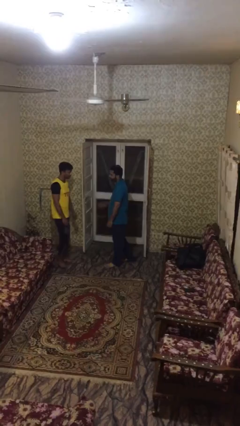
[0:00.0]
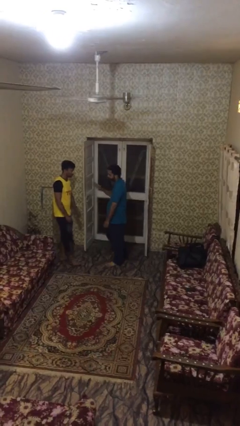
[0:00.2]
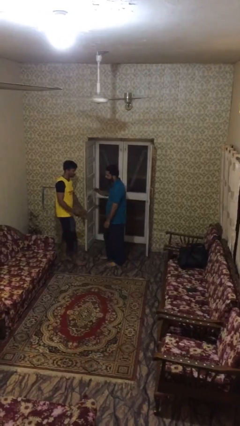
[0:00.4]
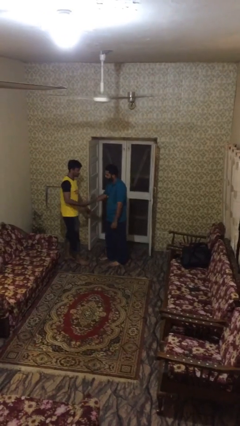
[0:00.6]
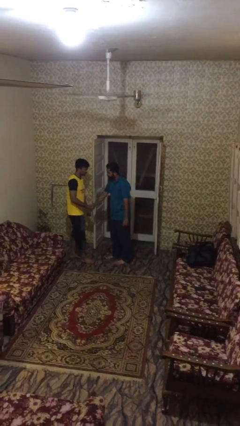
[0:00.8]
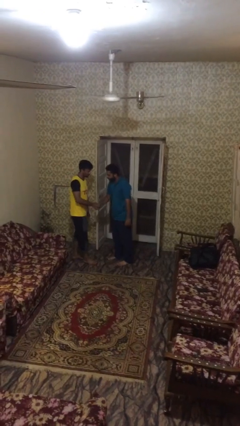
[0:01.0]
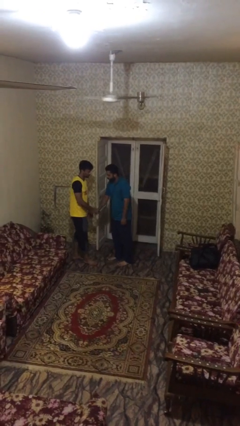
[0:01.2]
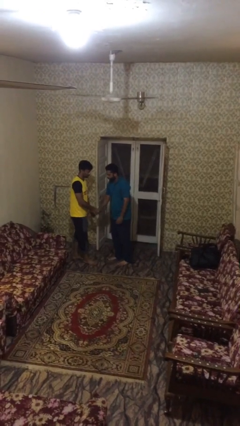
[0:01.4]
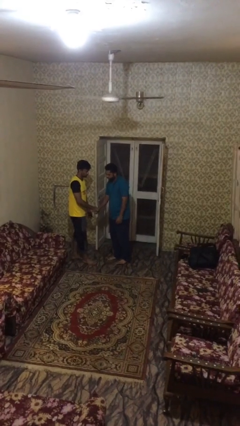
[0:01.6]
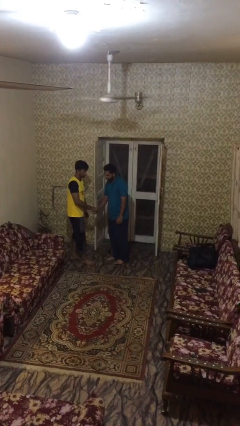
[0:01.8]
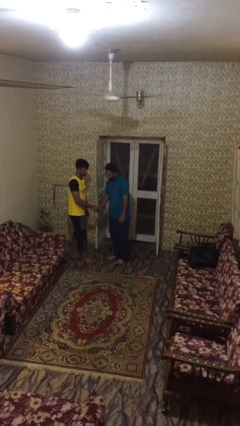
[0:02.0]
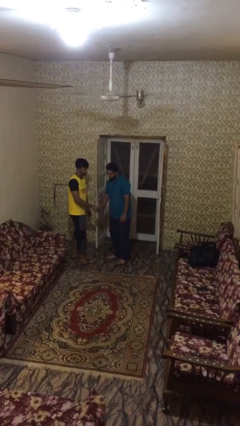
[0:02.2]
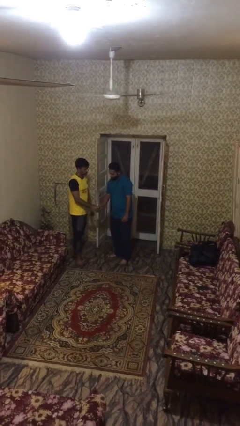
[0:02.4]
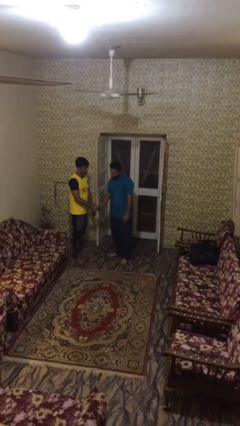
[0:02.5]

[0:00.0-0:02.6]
person shakes hand

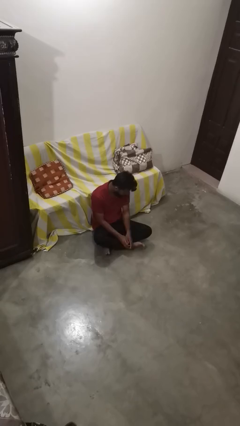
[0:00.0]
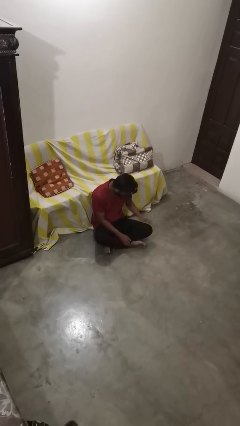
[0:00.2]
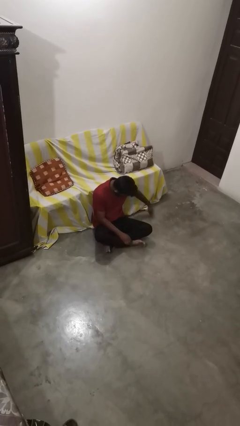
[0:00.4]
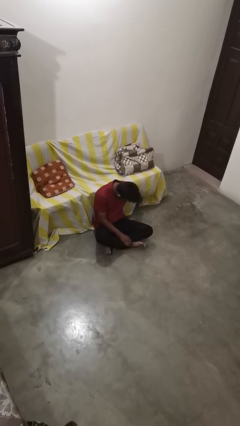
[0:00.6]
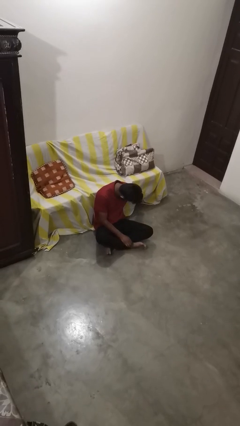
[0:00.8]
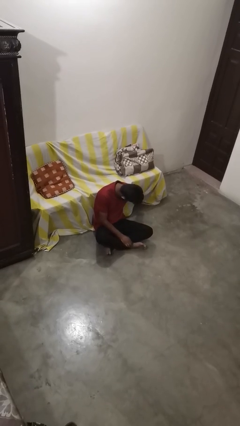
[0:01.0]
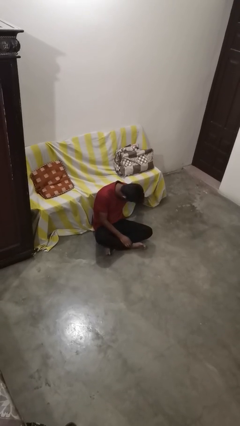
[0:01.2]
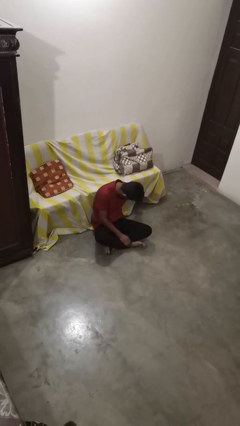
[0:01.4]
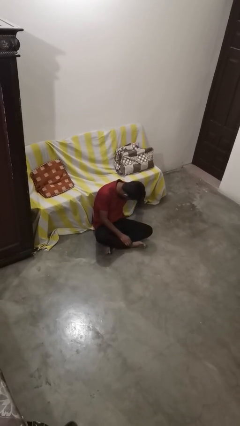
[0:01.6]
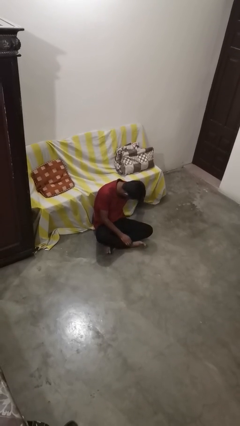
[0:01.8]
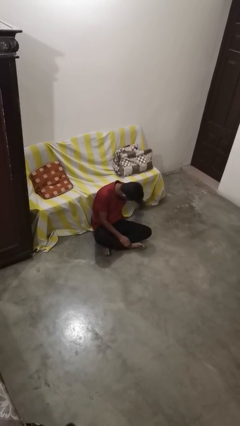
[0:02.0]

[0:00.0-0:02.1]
person searches under couch

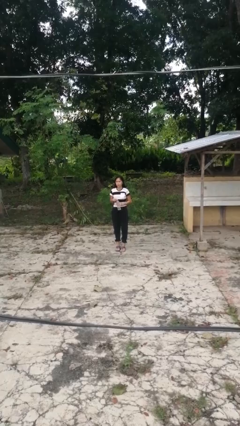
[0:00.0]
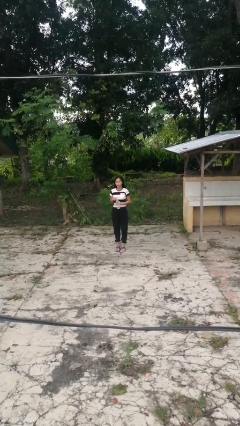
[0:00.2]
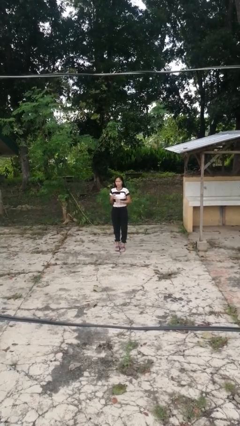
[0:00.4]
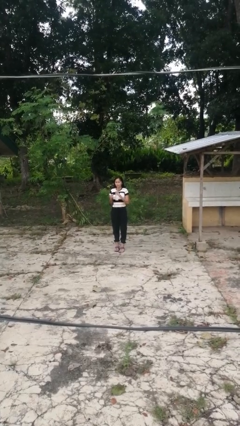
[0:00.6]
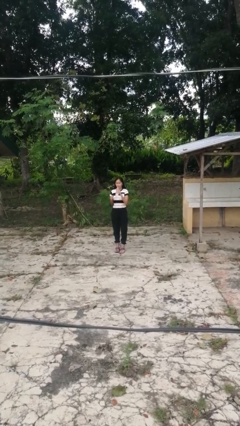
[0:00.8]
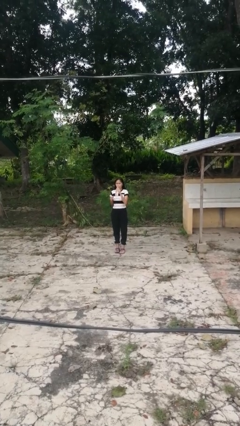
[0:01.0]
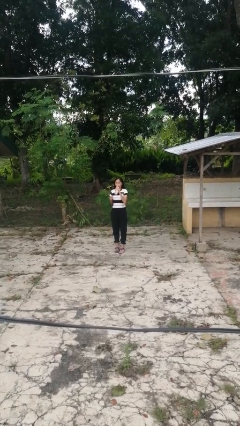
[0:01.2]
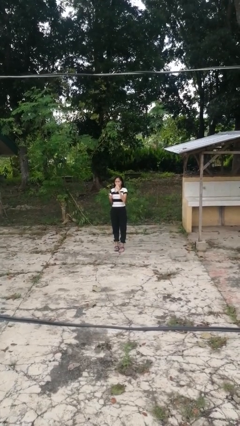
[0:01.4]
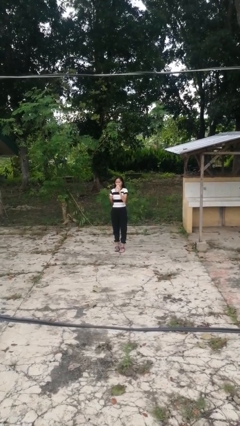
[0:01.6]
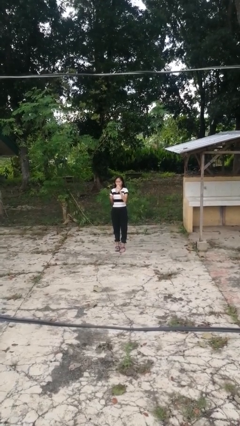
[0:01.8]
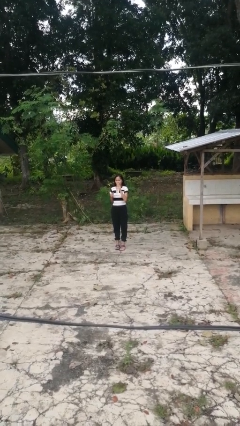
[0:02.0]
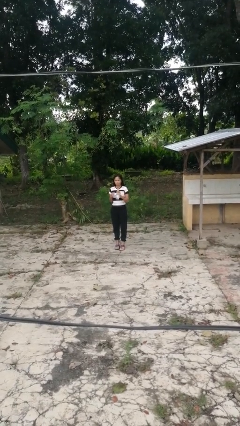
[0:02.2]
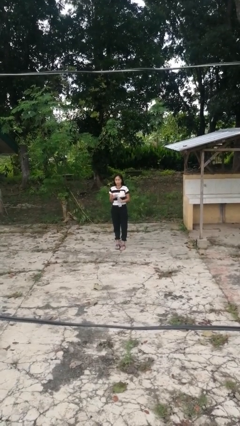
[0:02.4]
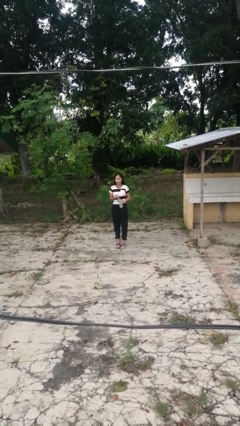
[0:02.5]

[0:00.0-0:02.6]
person drinks from bottle

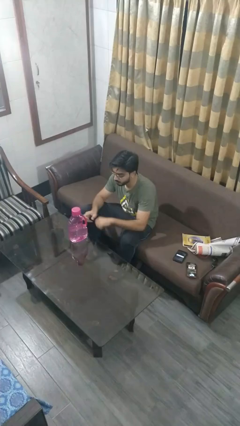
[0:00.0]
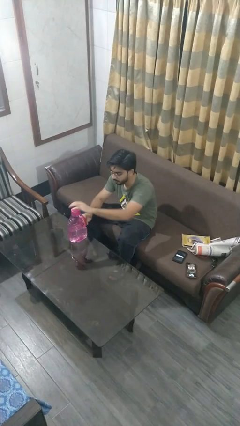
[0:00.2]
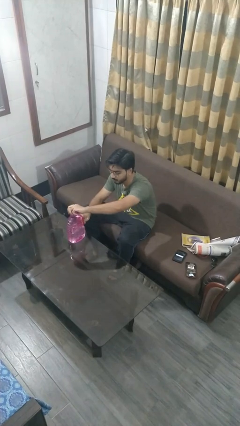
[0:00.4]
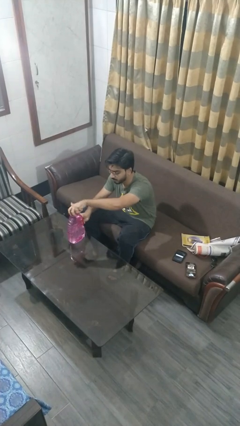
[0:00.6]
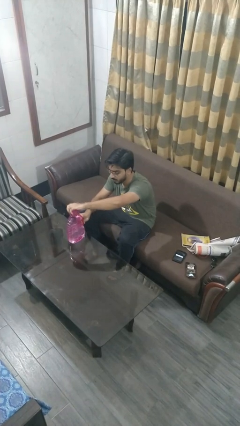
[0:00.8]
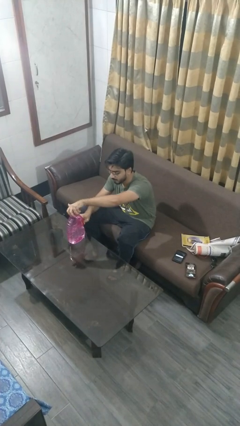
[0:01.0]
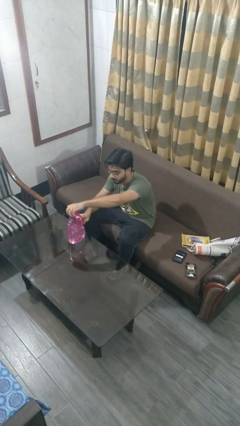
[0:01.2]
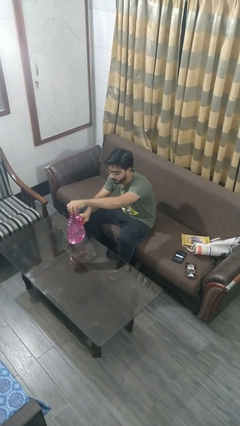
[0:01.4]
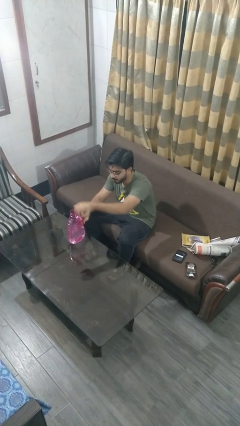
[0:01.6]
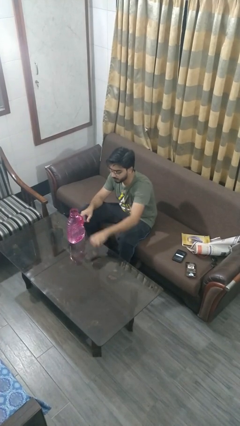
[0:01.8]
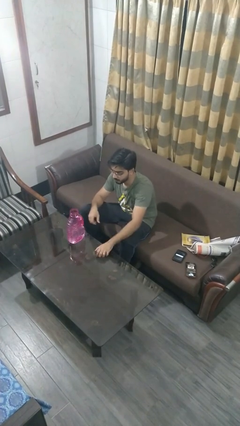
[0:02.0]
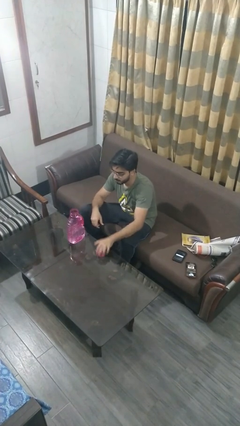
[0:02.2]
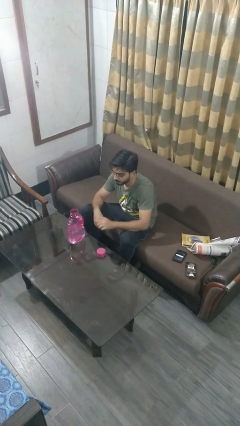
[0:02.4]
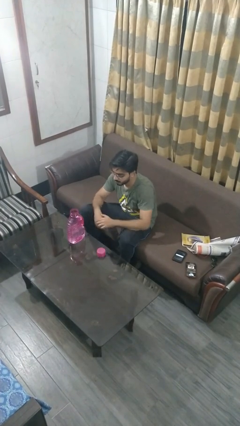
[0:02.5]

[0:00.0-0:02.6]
person unscrews lid from bottle

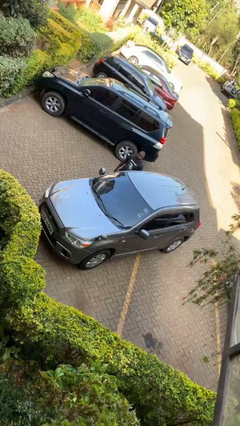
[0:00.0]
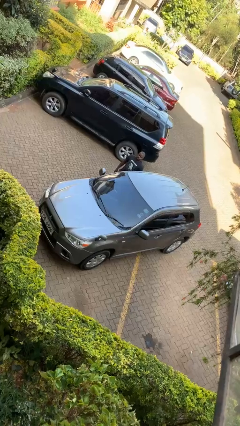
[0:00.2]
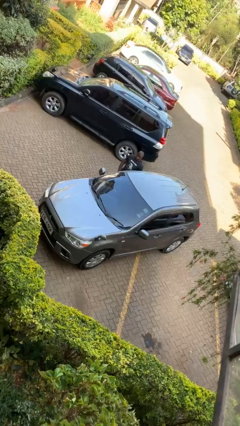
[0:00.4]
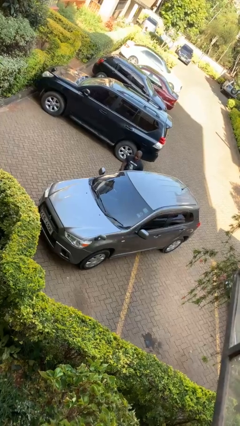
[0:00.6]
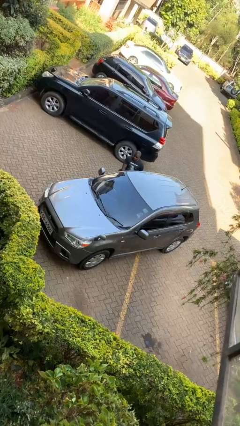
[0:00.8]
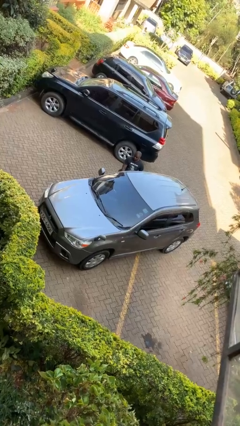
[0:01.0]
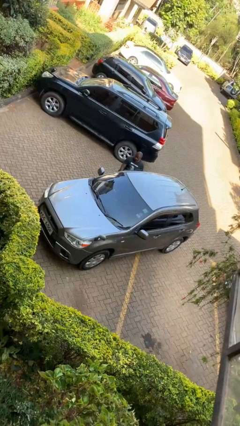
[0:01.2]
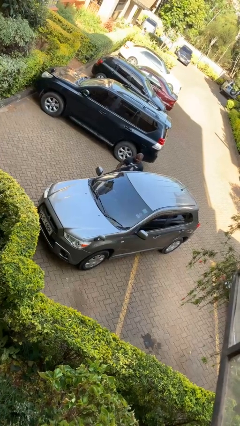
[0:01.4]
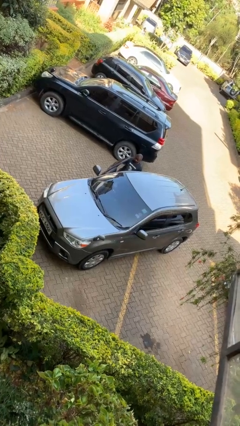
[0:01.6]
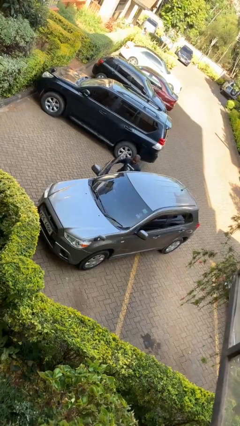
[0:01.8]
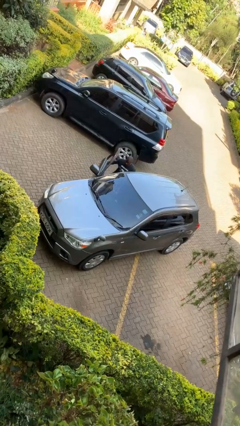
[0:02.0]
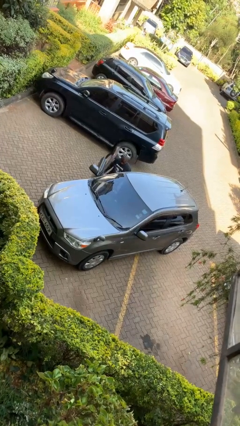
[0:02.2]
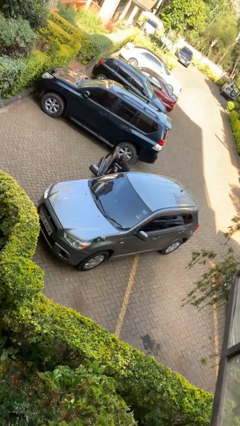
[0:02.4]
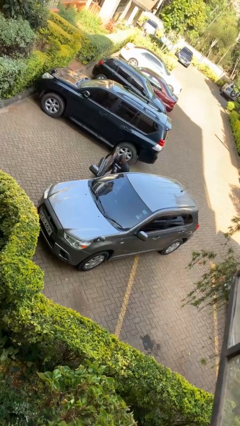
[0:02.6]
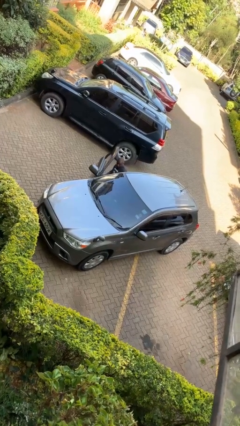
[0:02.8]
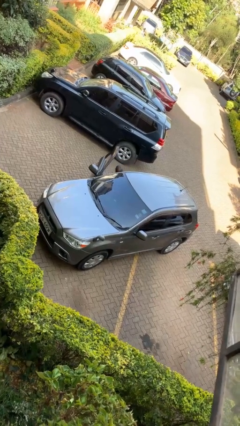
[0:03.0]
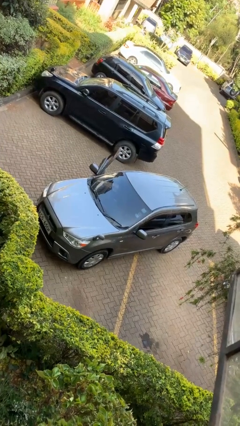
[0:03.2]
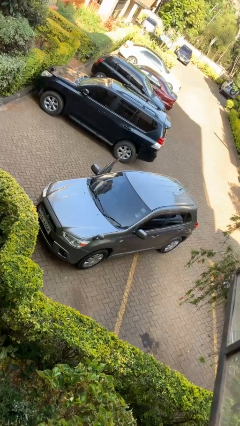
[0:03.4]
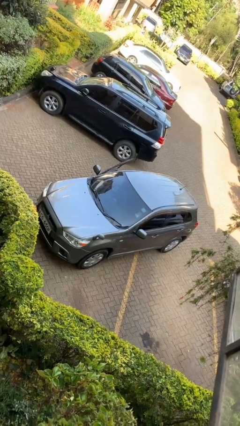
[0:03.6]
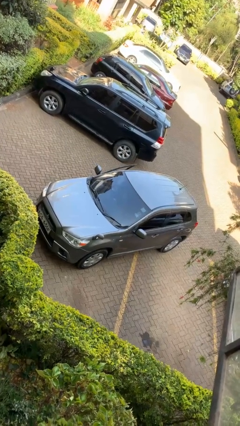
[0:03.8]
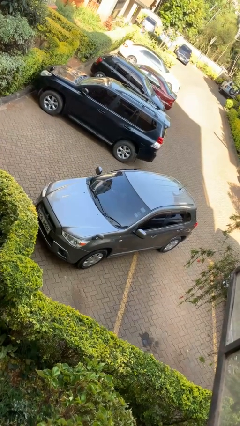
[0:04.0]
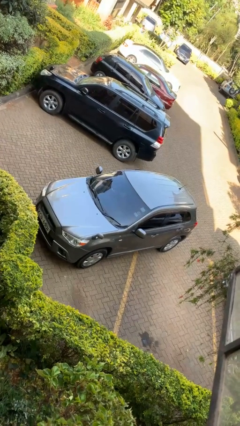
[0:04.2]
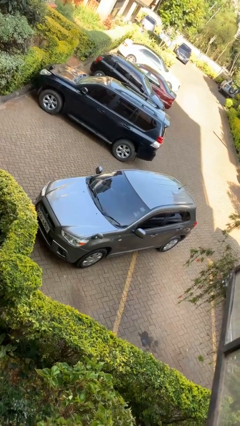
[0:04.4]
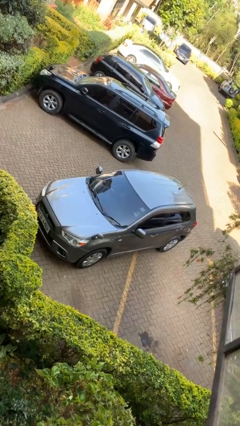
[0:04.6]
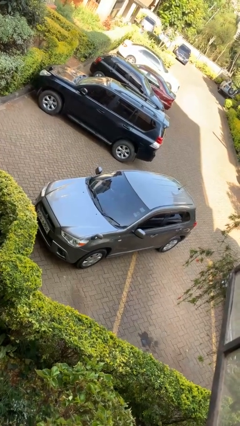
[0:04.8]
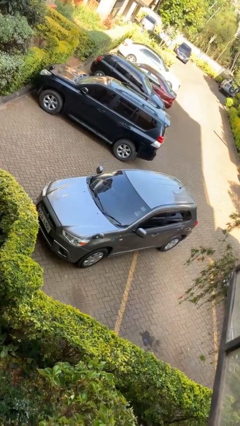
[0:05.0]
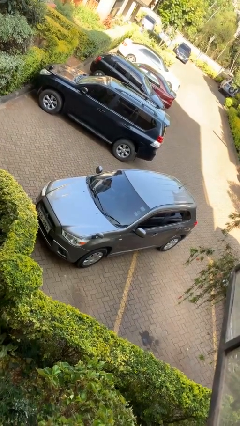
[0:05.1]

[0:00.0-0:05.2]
car picks up person

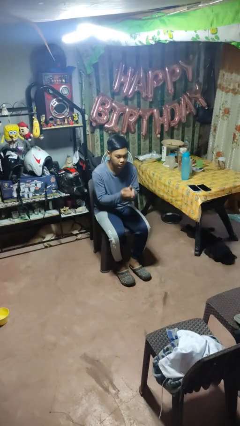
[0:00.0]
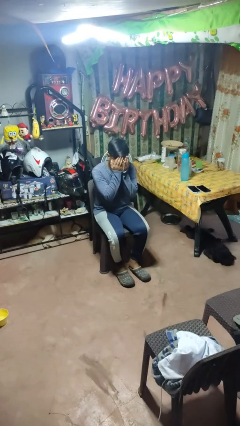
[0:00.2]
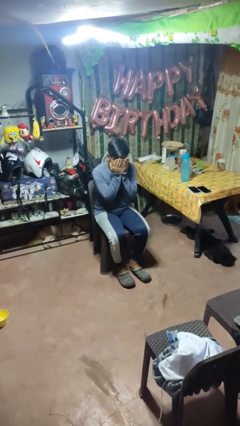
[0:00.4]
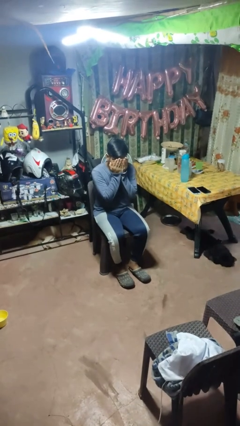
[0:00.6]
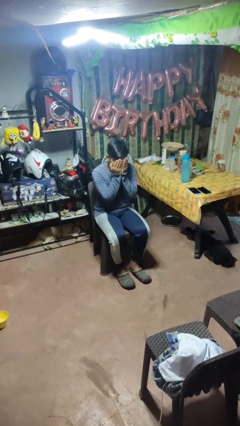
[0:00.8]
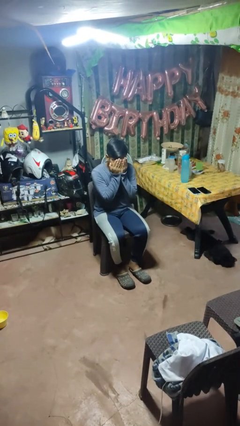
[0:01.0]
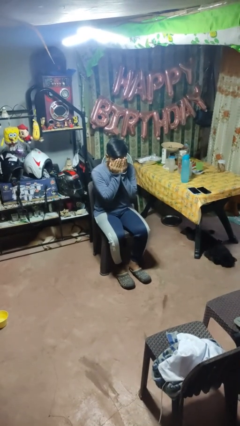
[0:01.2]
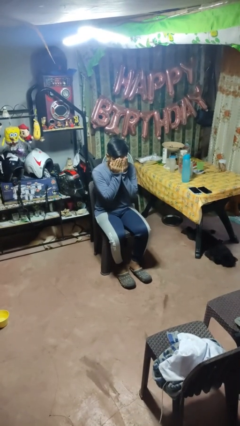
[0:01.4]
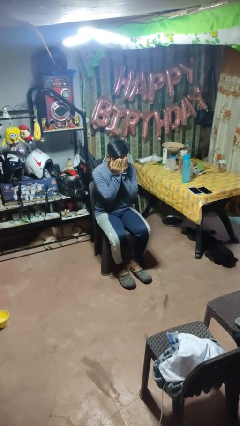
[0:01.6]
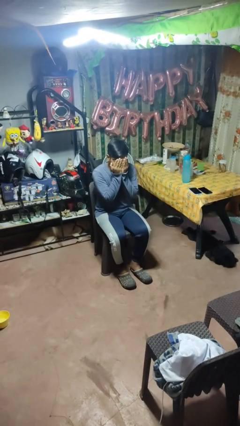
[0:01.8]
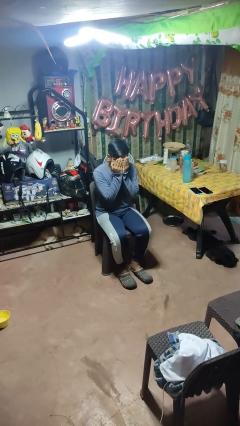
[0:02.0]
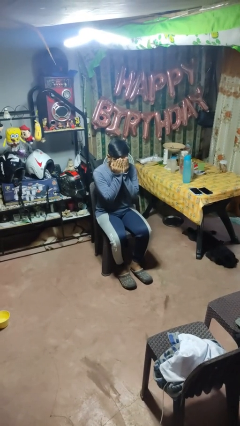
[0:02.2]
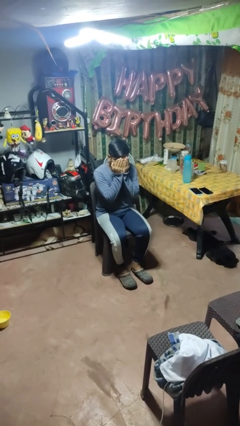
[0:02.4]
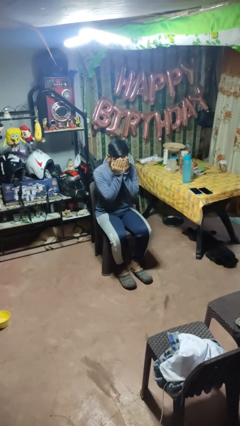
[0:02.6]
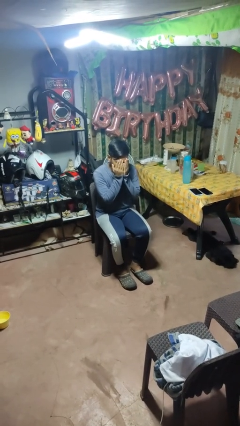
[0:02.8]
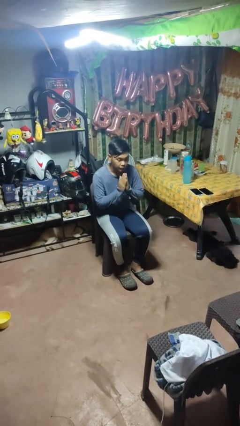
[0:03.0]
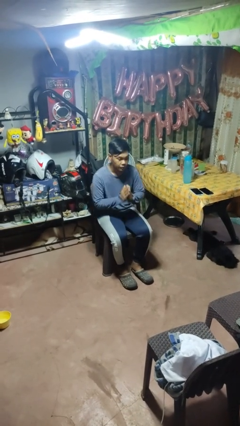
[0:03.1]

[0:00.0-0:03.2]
person covers face with hands
